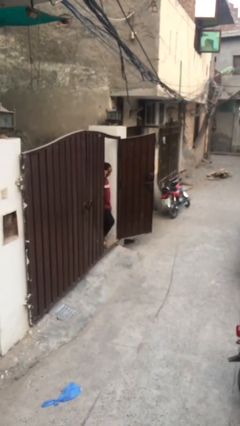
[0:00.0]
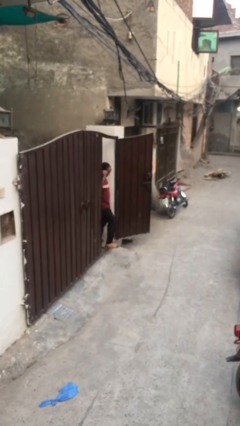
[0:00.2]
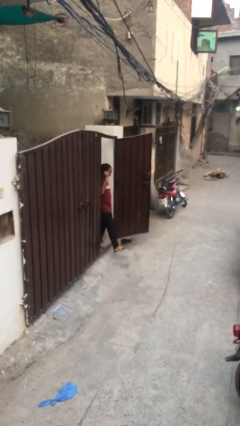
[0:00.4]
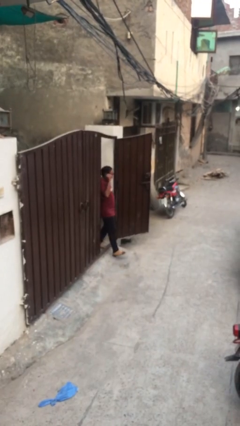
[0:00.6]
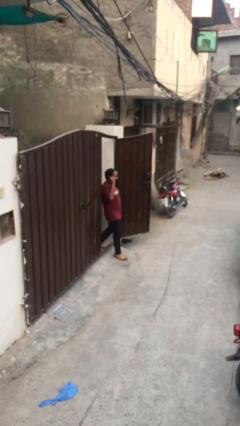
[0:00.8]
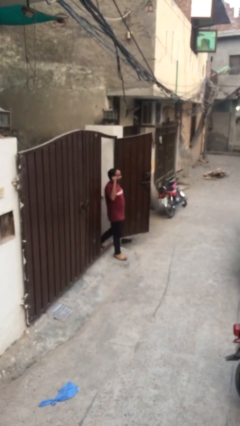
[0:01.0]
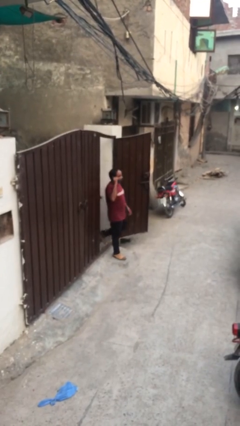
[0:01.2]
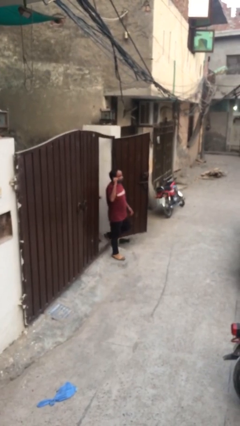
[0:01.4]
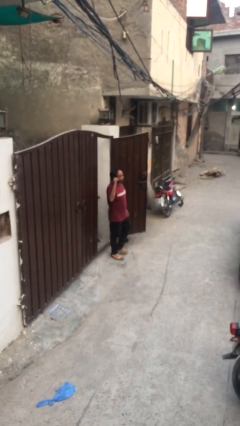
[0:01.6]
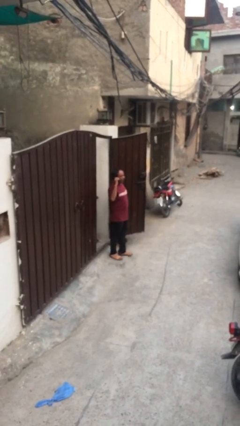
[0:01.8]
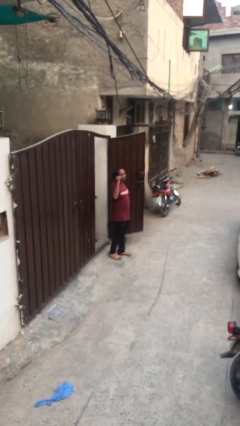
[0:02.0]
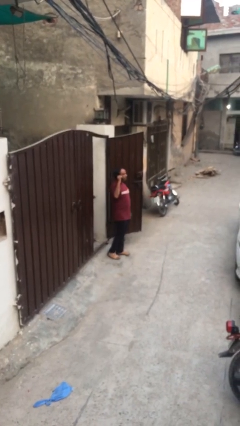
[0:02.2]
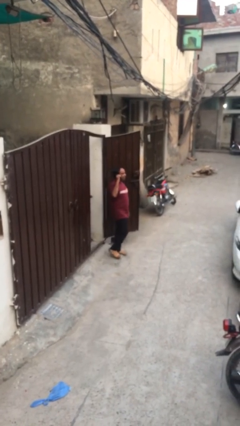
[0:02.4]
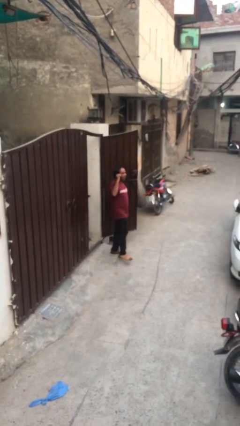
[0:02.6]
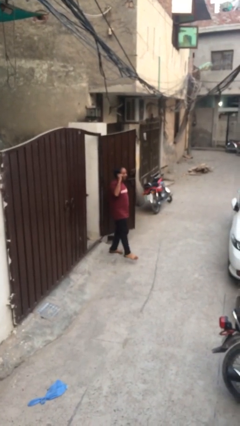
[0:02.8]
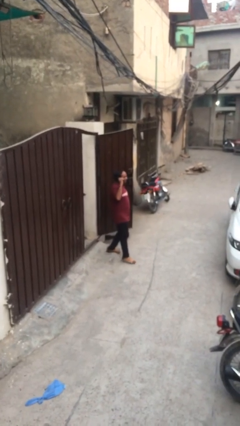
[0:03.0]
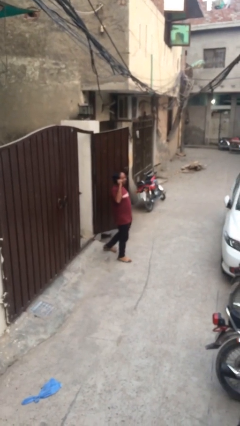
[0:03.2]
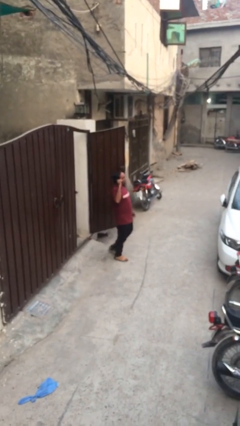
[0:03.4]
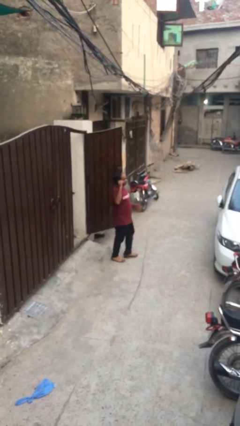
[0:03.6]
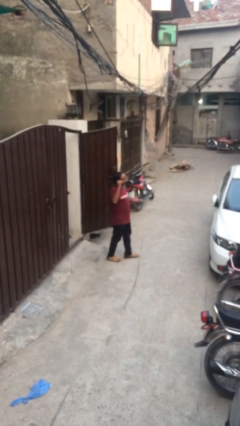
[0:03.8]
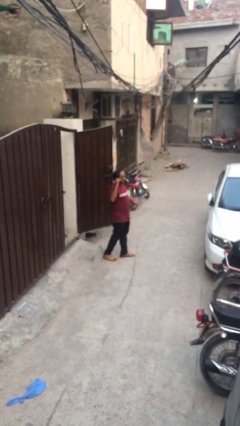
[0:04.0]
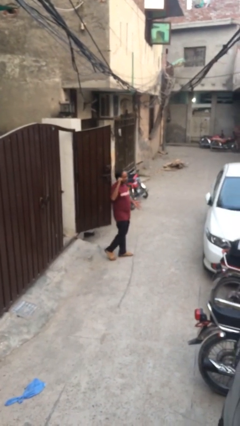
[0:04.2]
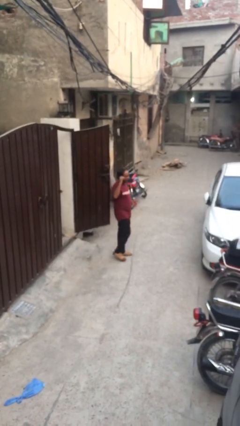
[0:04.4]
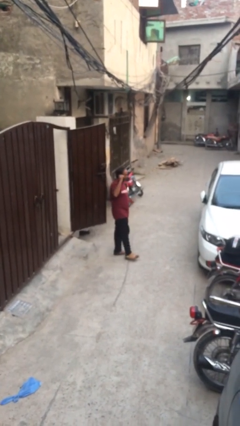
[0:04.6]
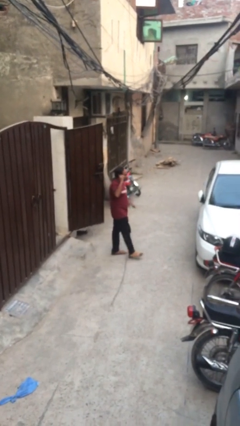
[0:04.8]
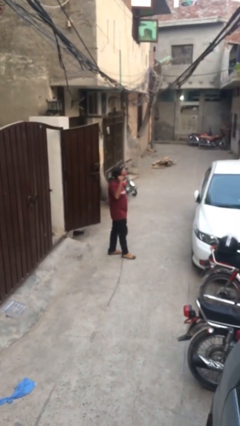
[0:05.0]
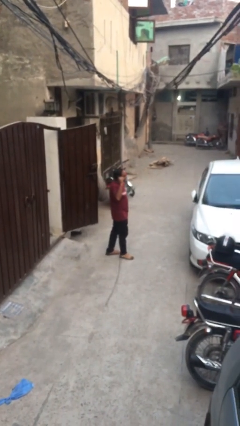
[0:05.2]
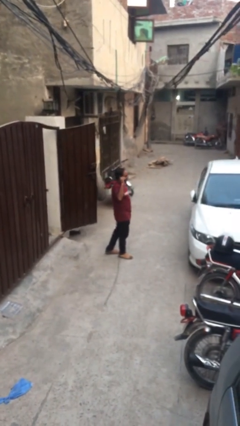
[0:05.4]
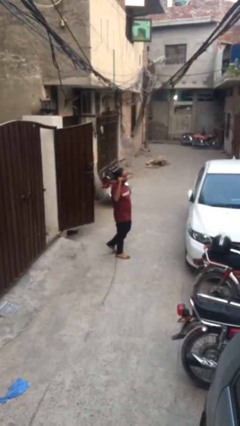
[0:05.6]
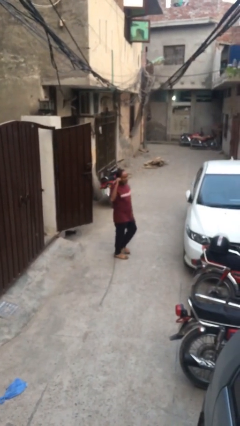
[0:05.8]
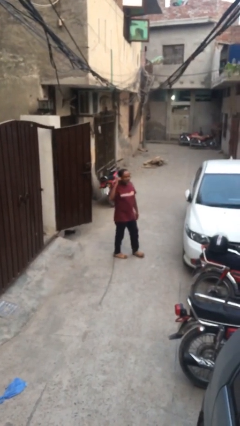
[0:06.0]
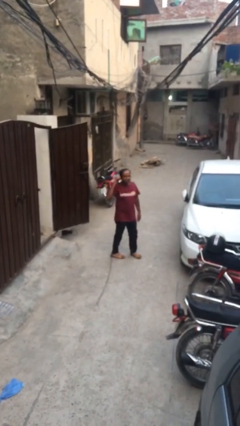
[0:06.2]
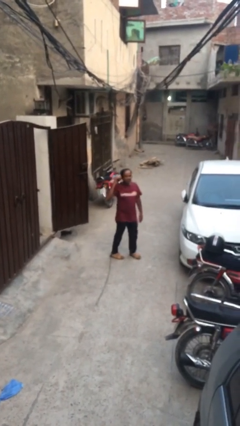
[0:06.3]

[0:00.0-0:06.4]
person enters scene through structure

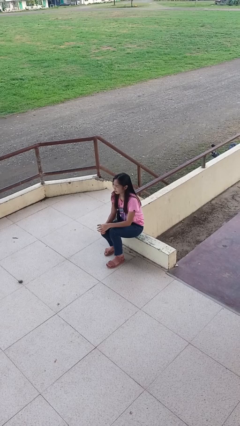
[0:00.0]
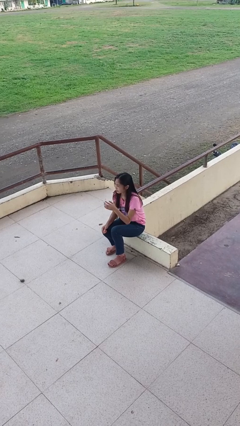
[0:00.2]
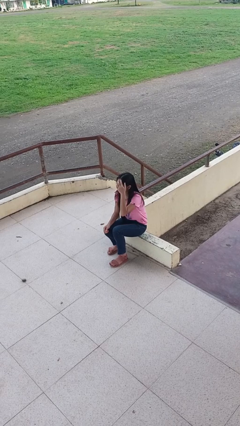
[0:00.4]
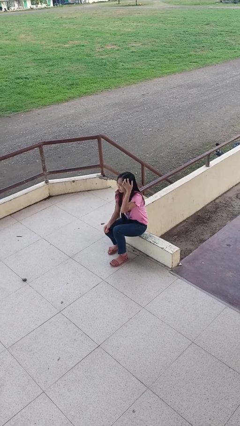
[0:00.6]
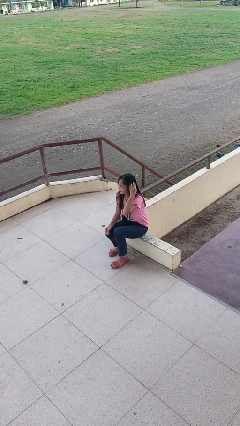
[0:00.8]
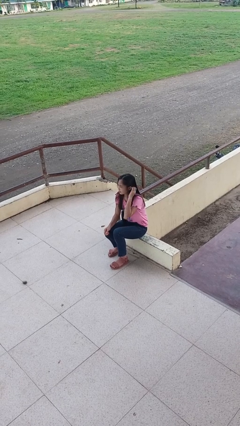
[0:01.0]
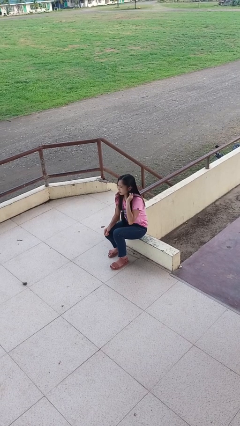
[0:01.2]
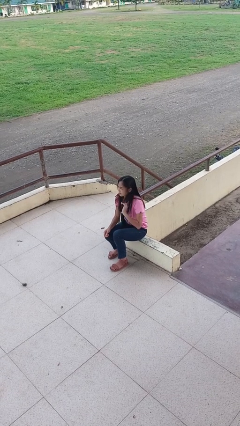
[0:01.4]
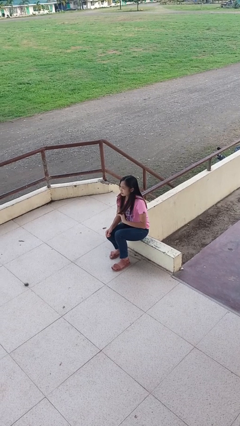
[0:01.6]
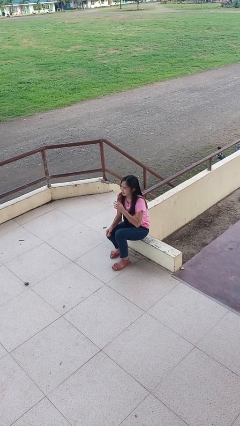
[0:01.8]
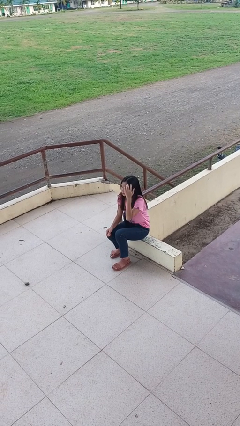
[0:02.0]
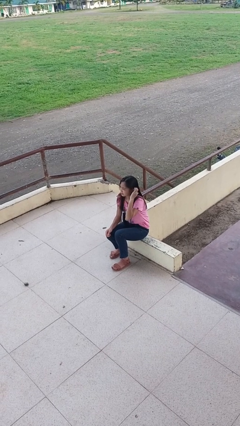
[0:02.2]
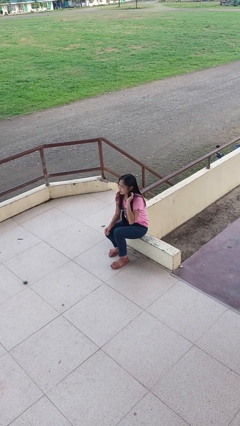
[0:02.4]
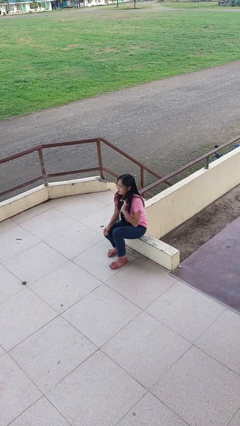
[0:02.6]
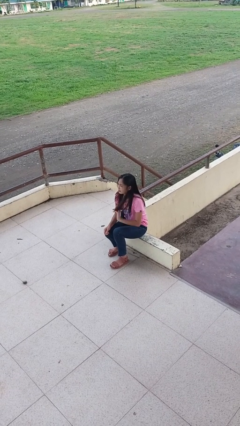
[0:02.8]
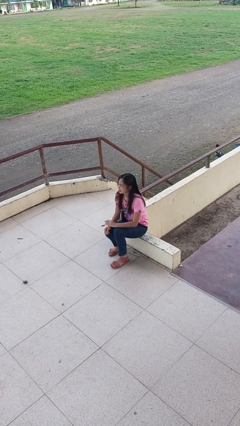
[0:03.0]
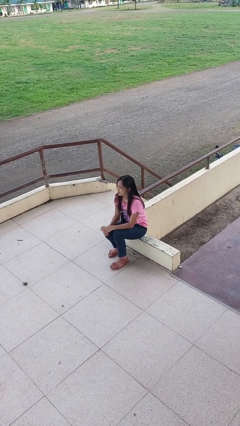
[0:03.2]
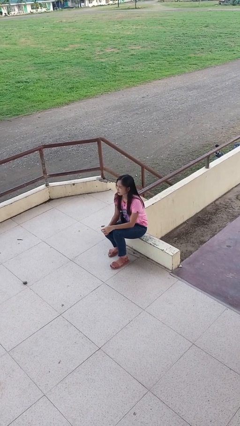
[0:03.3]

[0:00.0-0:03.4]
person strokes hair

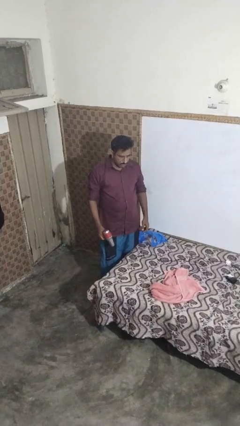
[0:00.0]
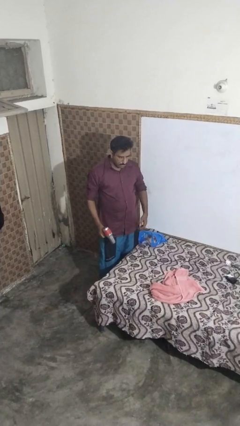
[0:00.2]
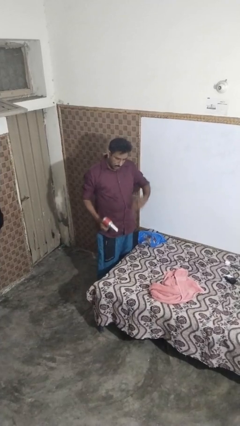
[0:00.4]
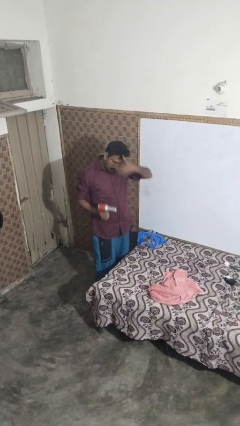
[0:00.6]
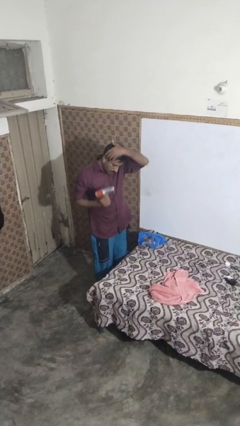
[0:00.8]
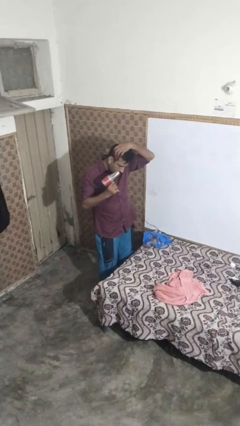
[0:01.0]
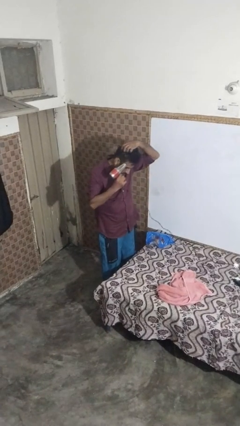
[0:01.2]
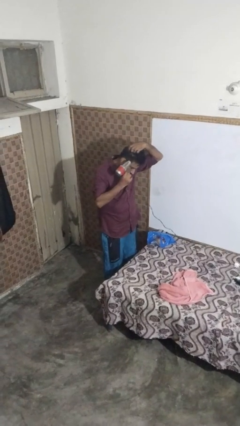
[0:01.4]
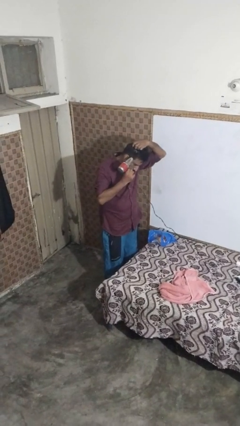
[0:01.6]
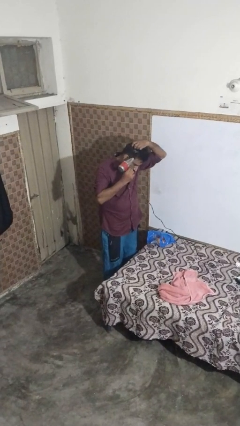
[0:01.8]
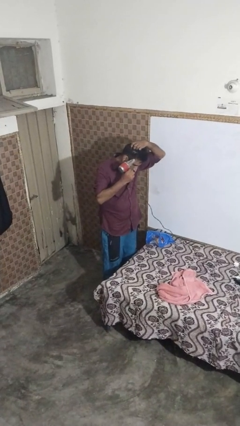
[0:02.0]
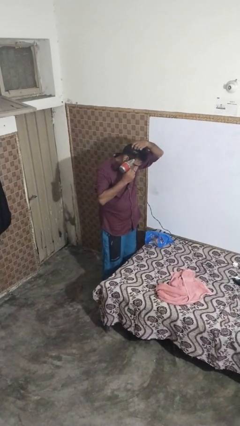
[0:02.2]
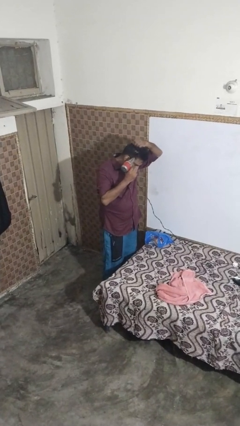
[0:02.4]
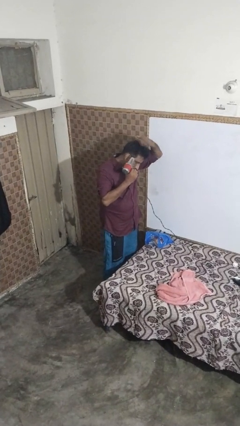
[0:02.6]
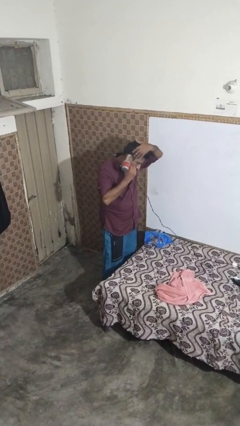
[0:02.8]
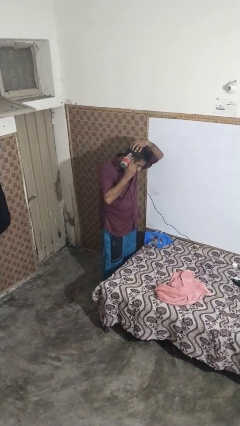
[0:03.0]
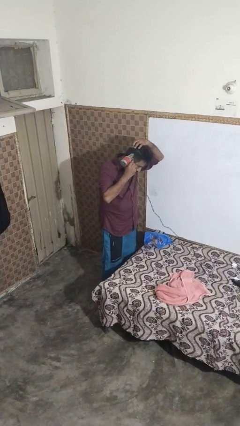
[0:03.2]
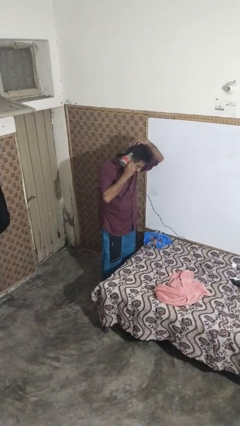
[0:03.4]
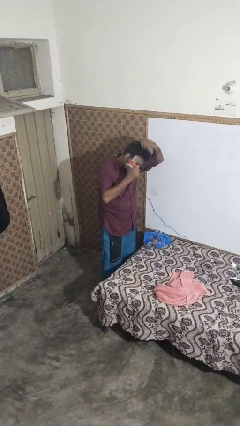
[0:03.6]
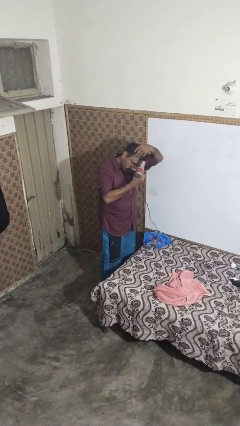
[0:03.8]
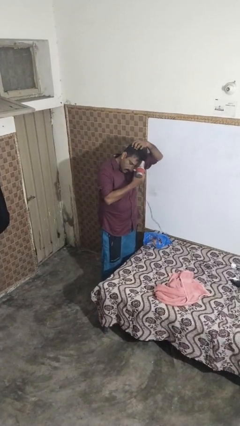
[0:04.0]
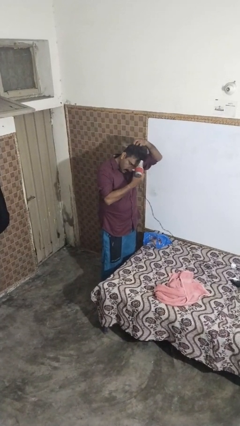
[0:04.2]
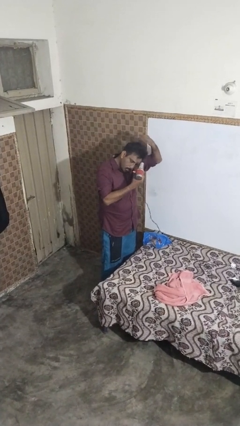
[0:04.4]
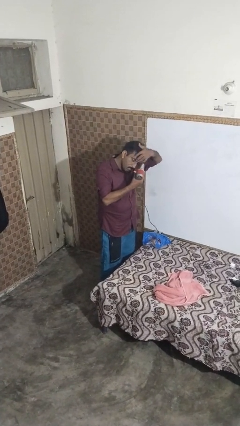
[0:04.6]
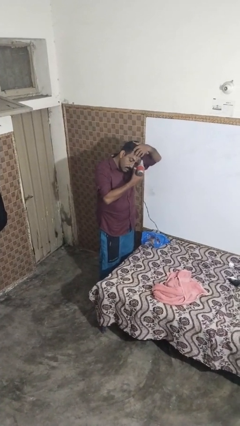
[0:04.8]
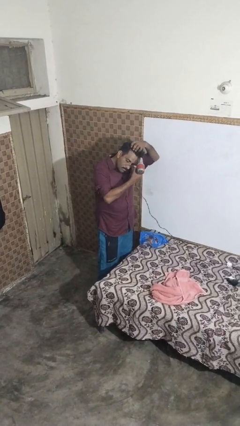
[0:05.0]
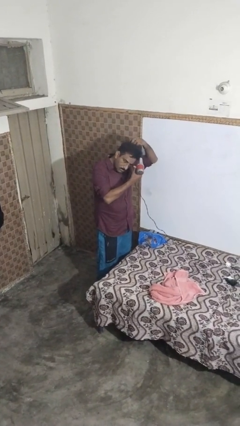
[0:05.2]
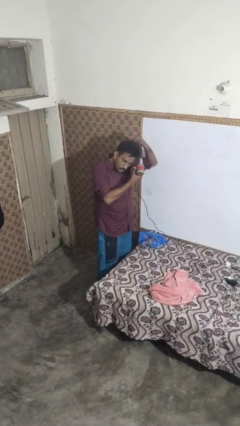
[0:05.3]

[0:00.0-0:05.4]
person dries hair with hairdryer

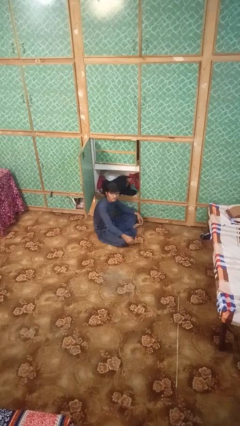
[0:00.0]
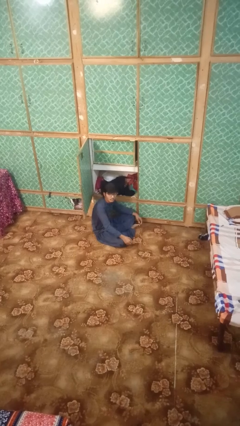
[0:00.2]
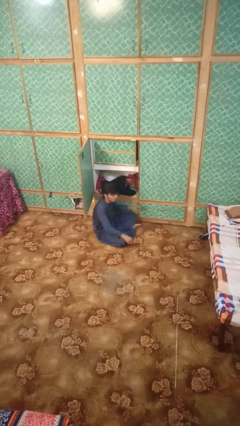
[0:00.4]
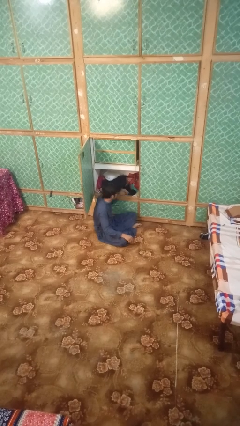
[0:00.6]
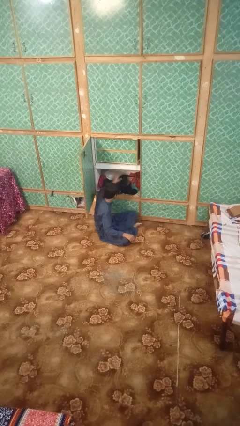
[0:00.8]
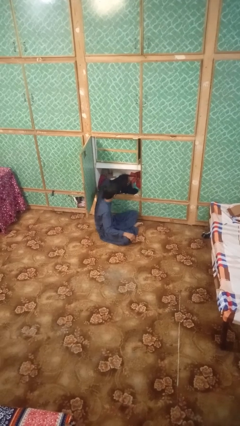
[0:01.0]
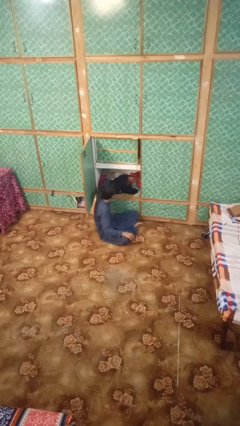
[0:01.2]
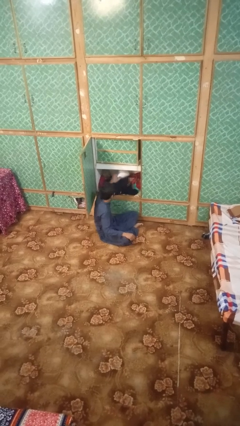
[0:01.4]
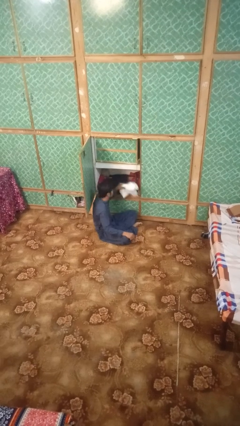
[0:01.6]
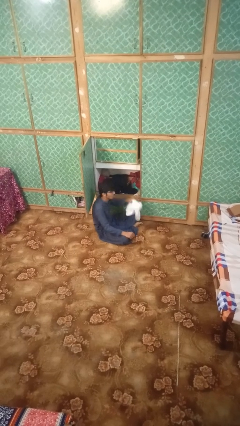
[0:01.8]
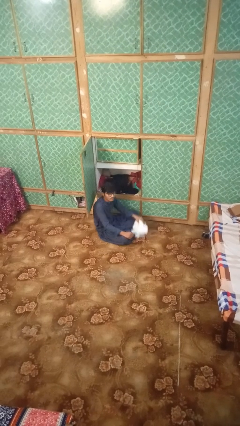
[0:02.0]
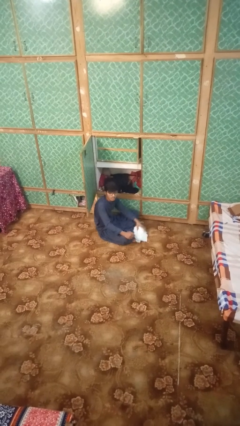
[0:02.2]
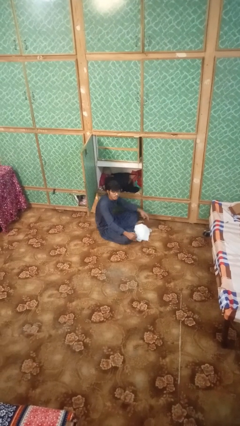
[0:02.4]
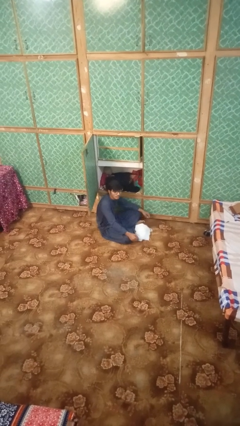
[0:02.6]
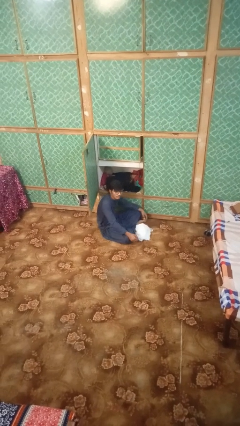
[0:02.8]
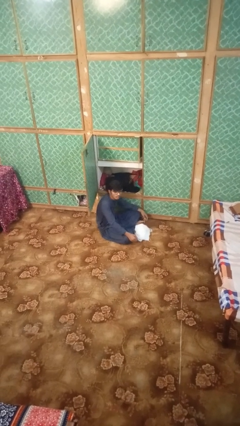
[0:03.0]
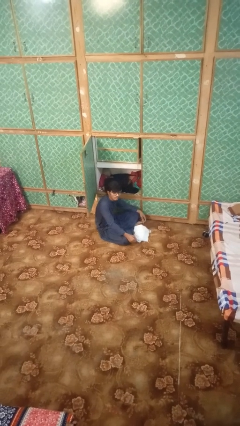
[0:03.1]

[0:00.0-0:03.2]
person takes clothes from dresser
